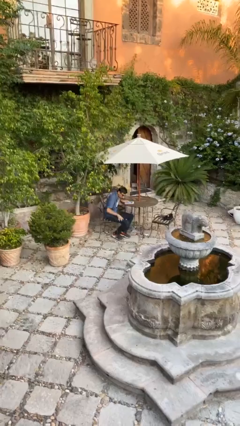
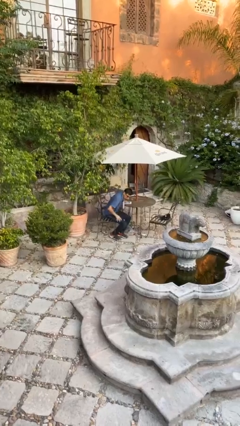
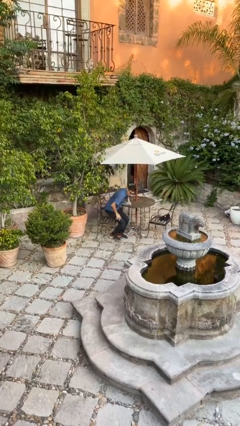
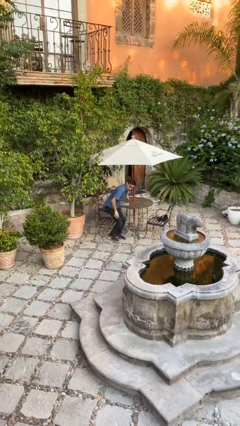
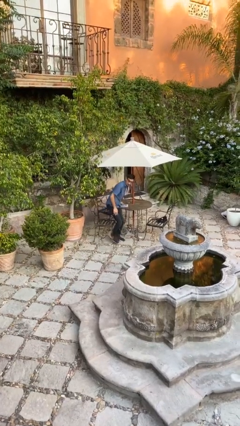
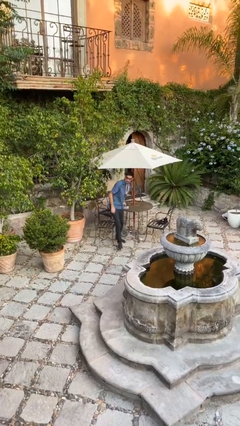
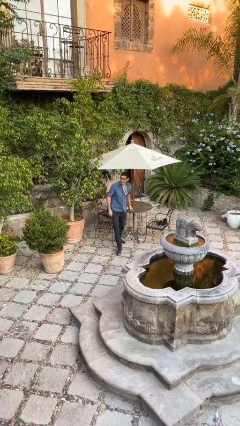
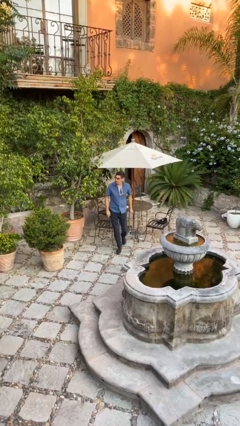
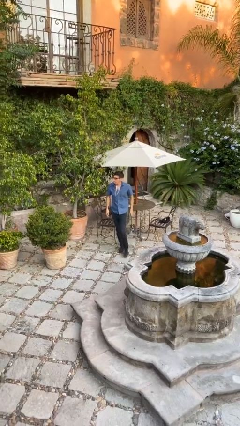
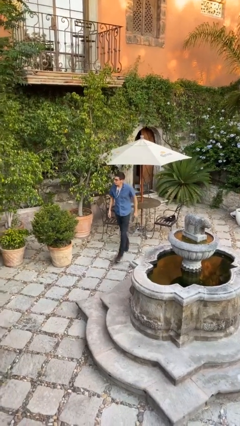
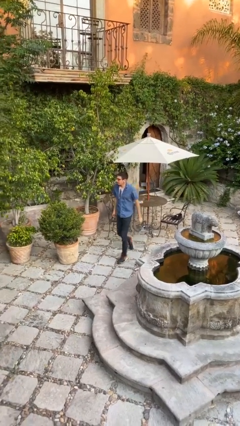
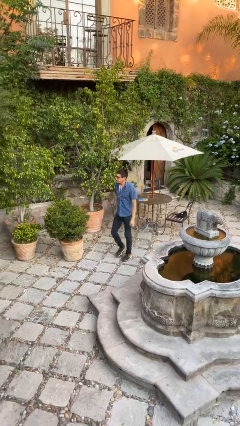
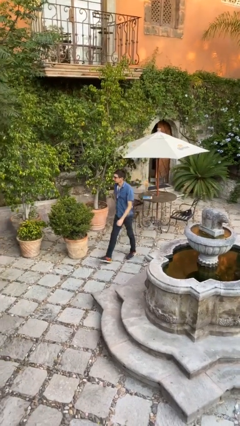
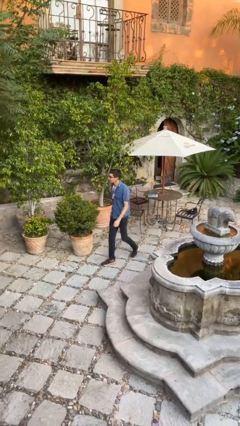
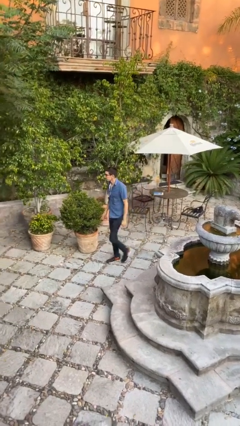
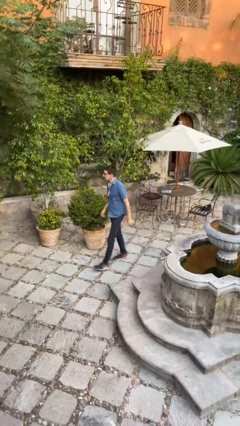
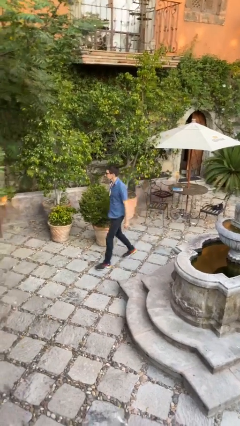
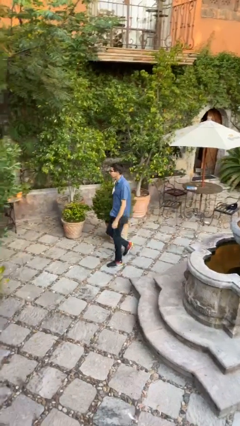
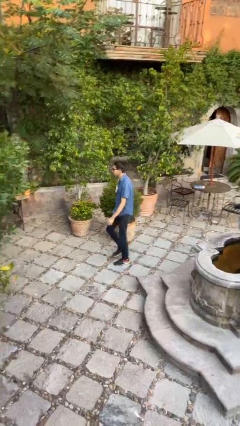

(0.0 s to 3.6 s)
person stands up

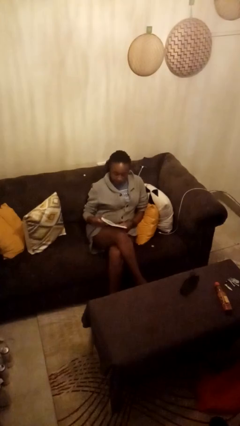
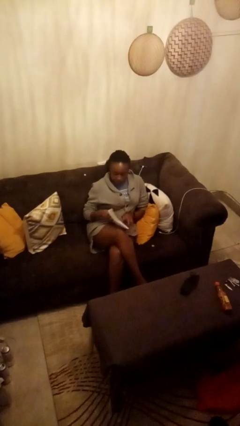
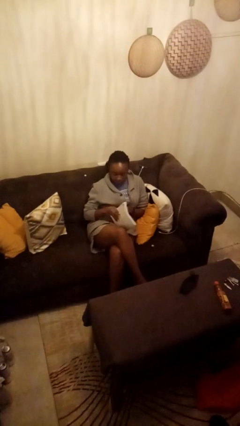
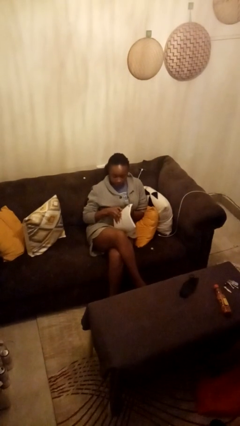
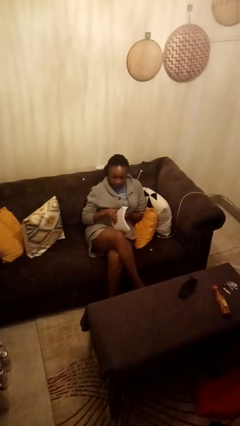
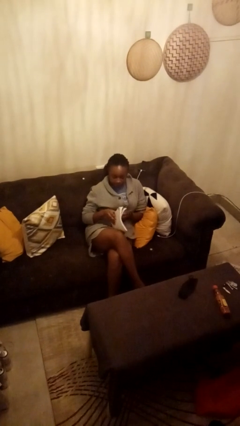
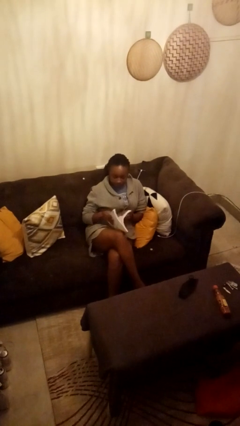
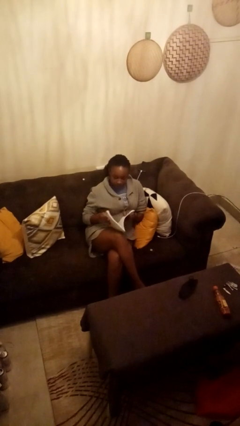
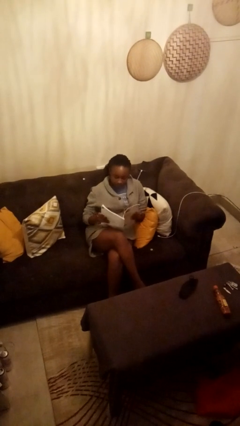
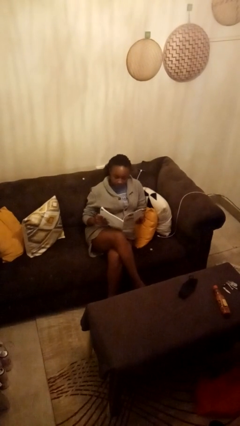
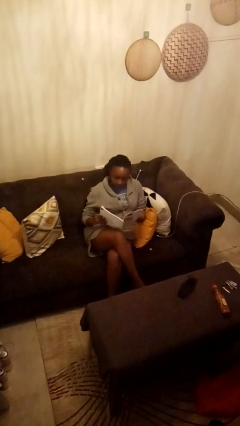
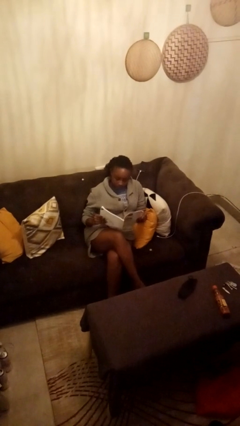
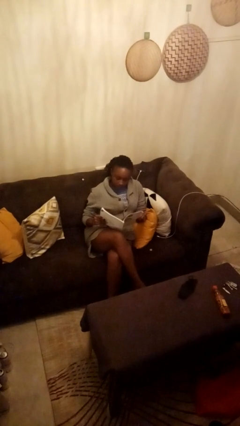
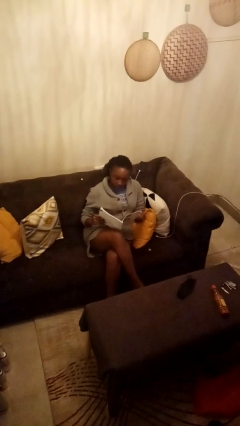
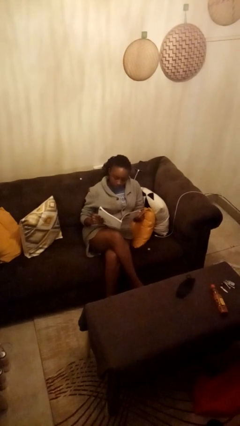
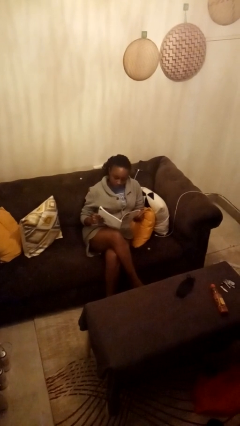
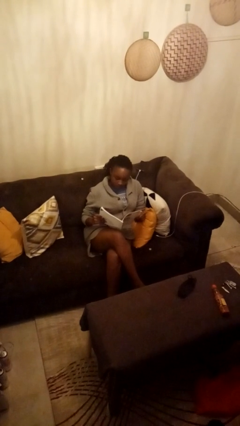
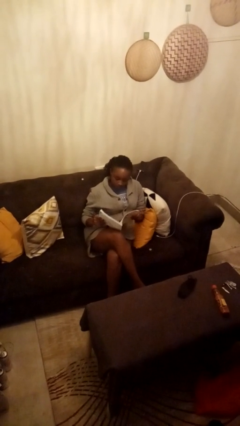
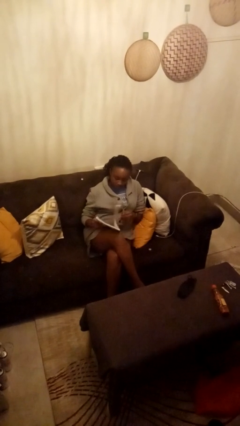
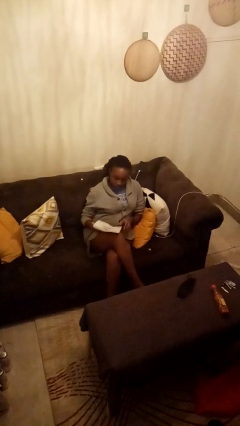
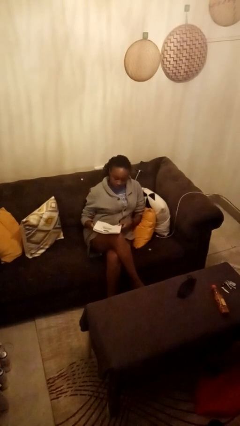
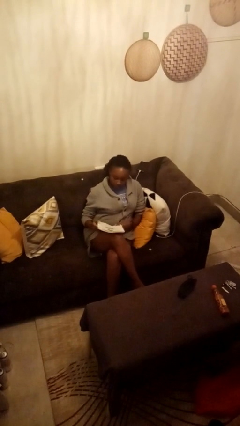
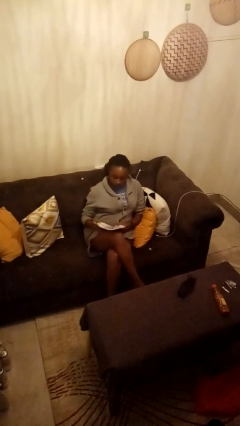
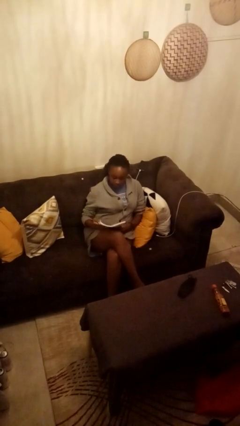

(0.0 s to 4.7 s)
person reads magazine

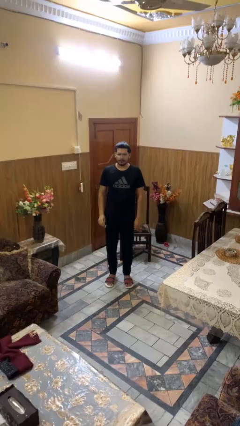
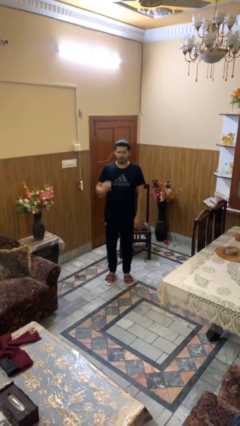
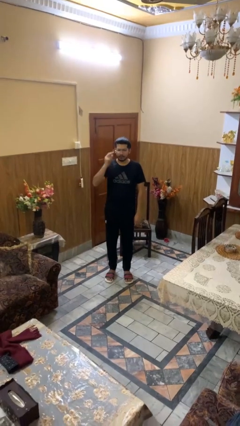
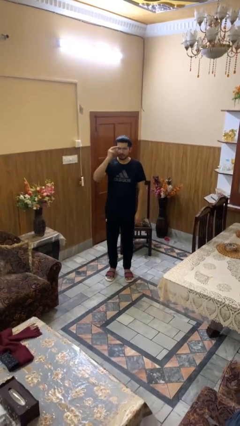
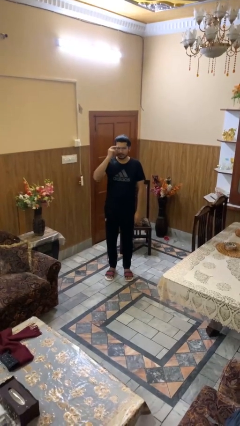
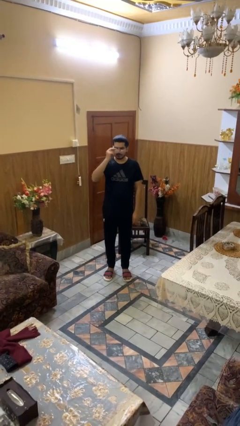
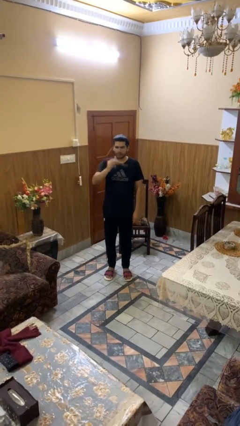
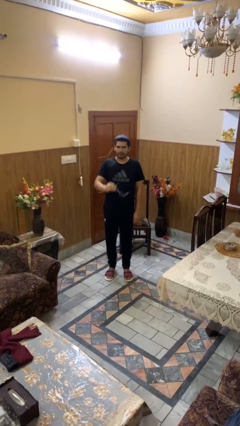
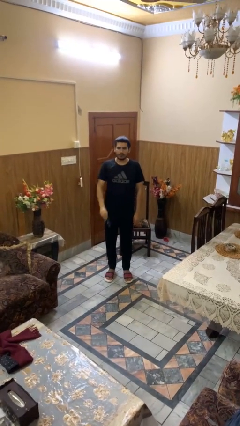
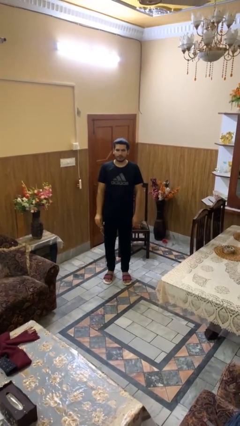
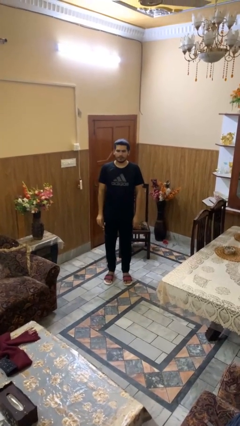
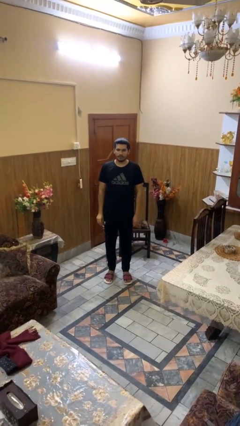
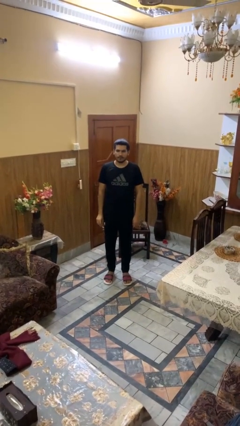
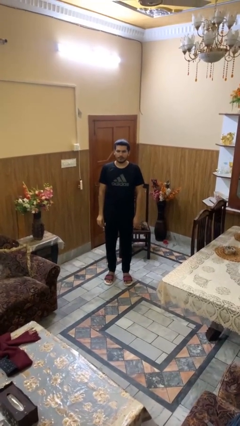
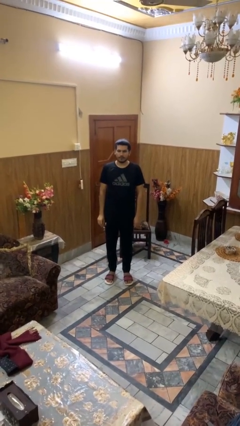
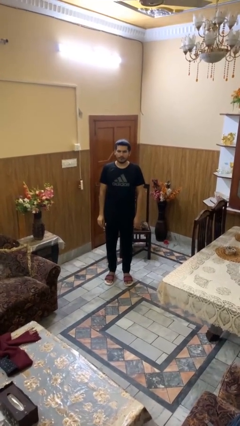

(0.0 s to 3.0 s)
person takes off glasses

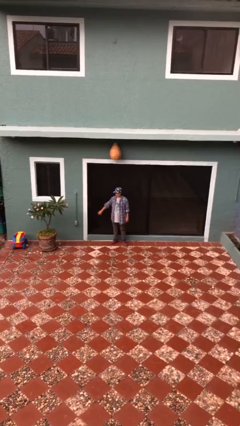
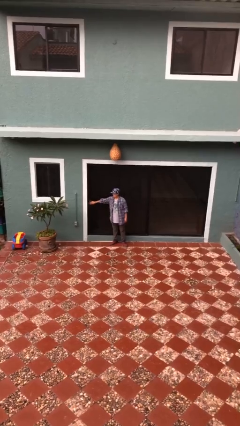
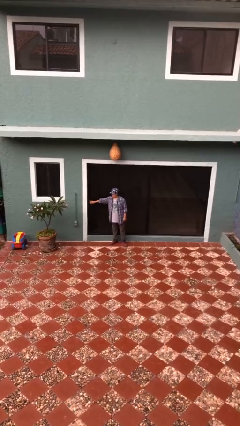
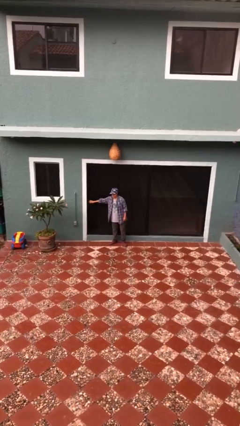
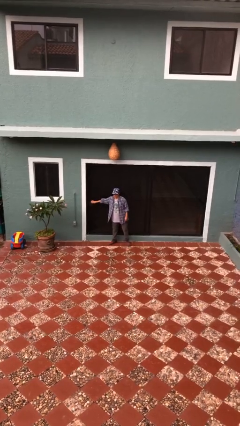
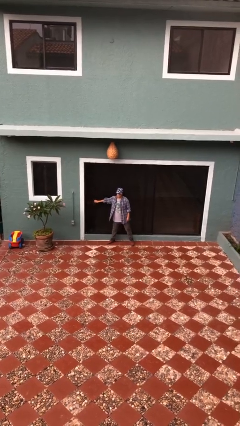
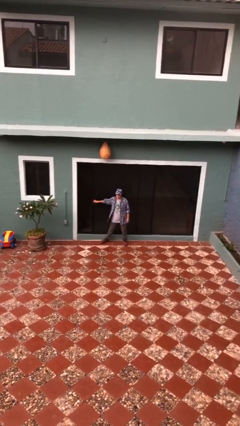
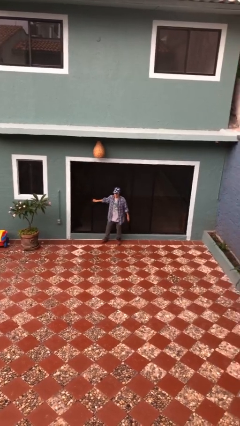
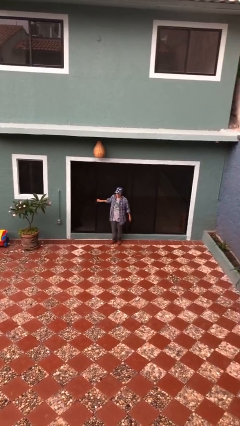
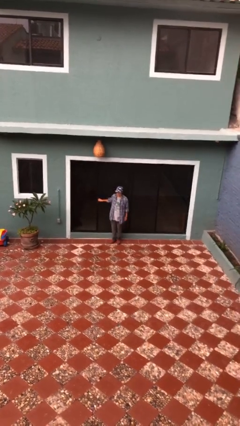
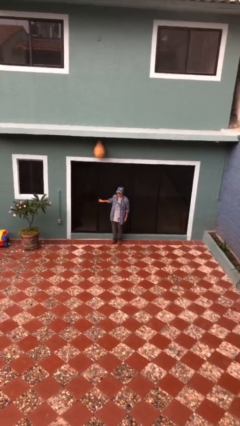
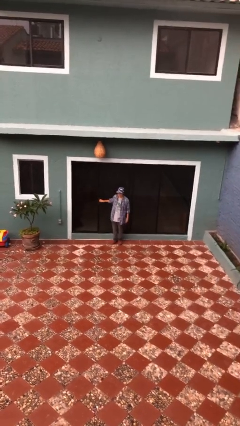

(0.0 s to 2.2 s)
person opens sliding door

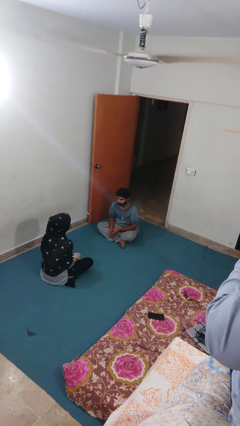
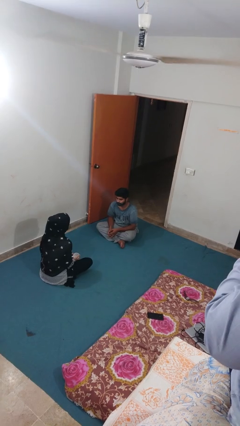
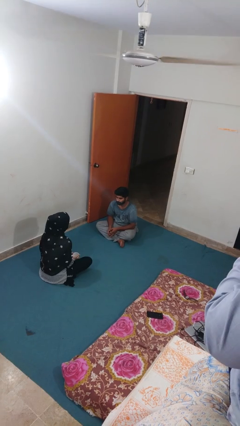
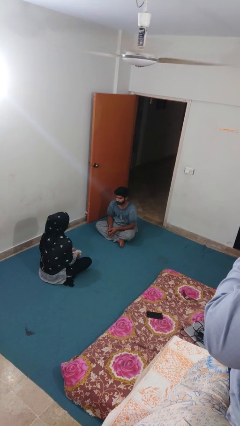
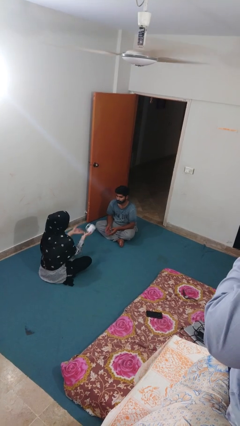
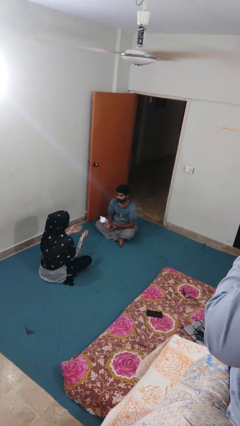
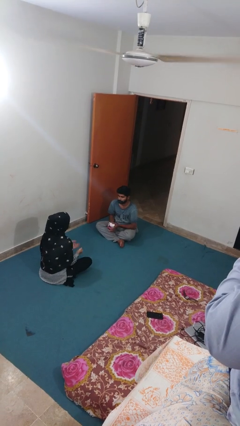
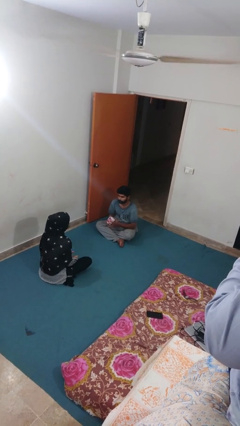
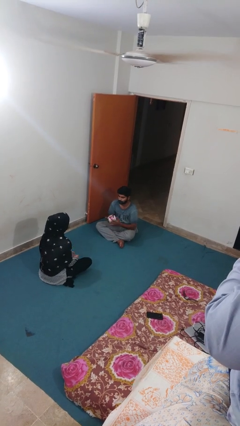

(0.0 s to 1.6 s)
person catches object from person

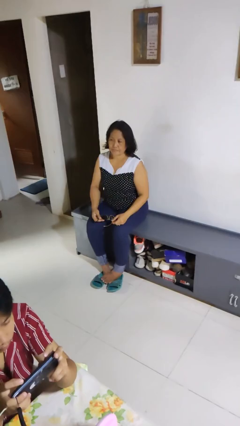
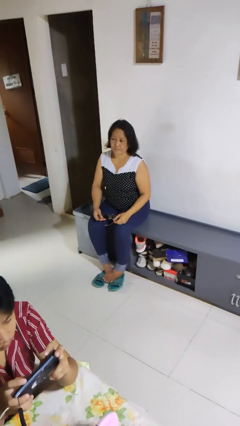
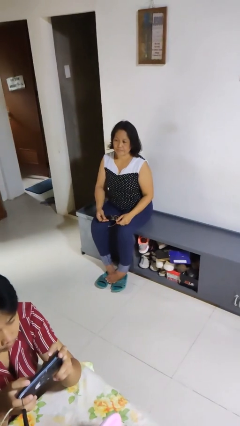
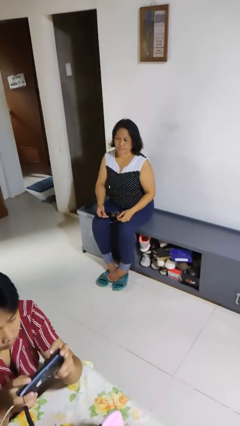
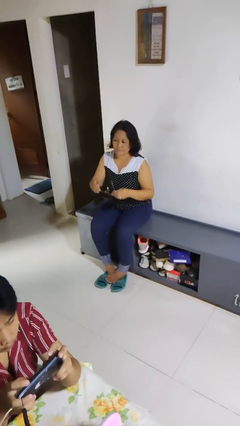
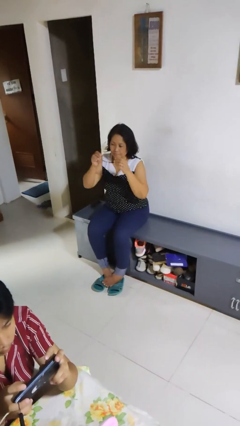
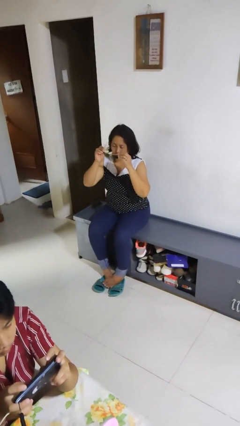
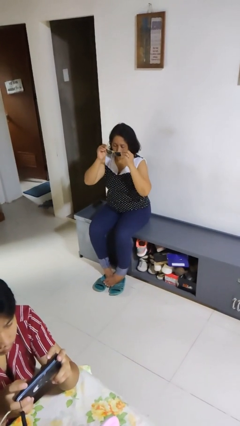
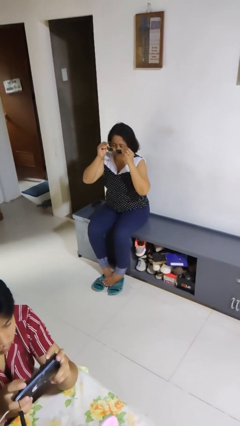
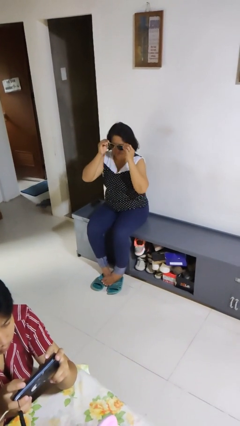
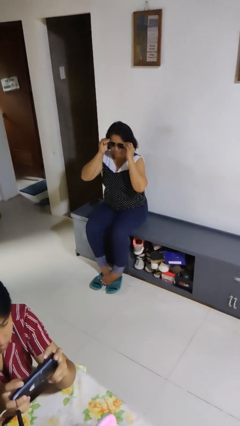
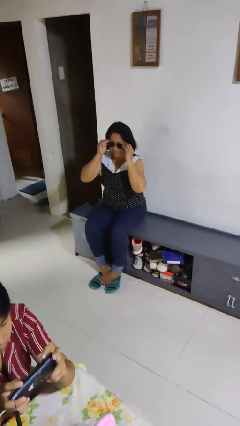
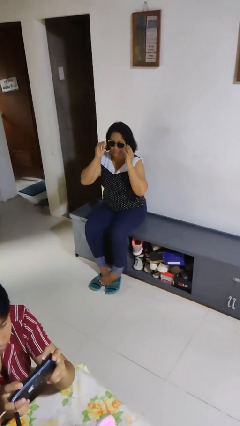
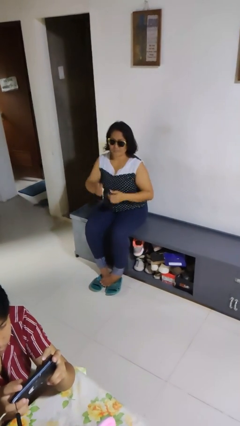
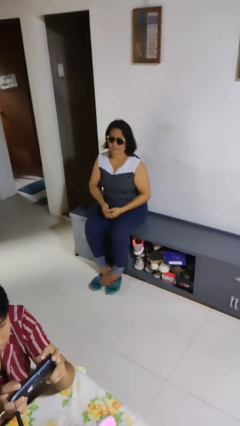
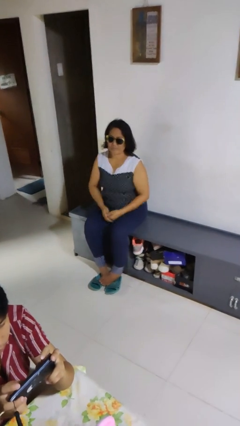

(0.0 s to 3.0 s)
person puts on sunglasses
